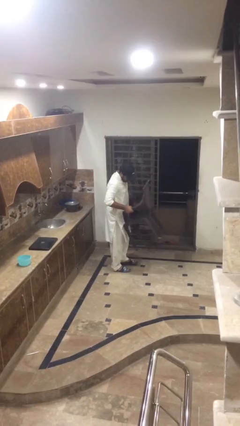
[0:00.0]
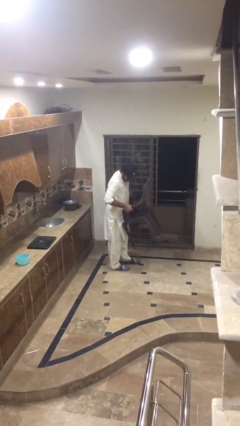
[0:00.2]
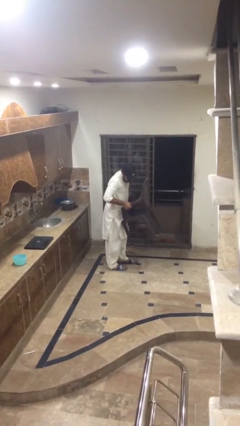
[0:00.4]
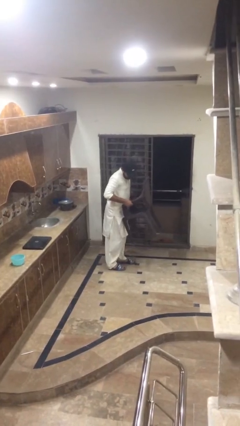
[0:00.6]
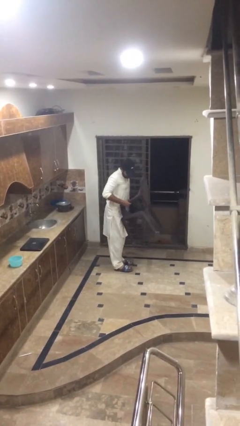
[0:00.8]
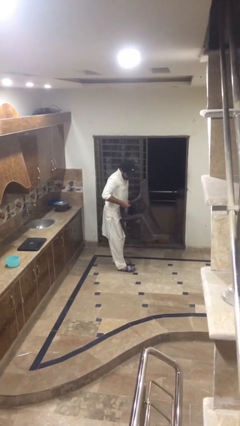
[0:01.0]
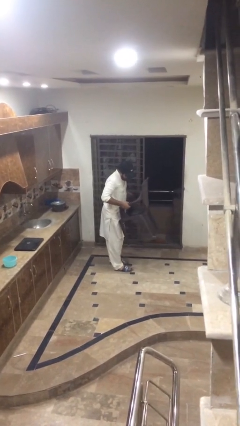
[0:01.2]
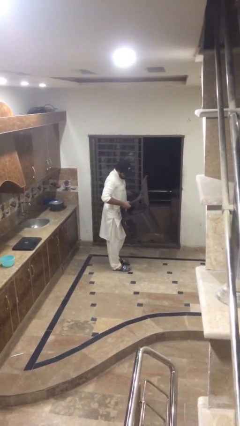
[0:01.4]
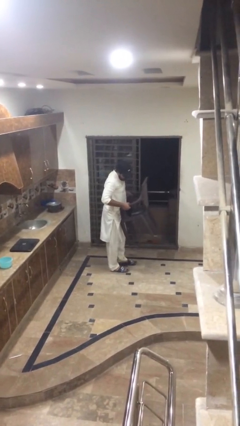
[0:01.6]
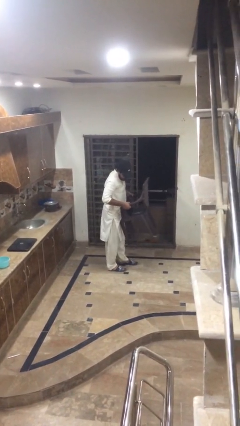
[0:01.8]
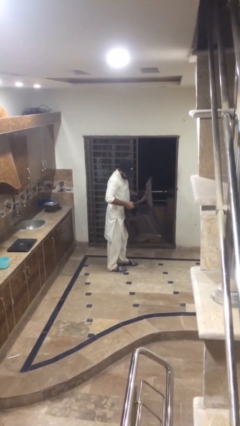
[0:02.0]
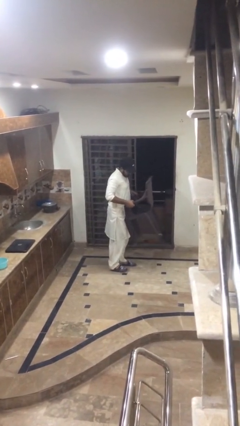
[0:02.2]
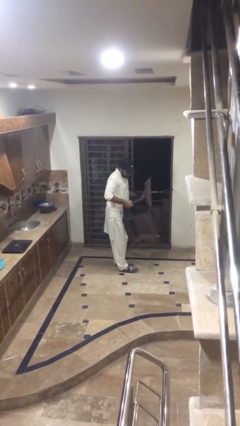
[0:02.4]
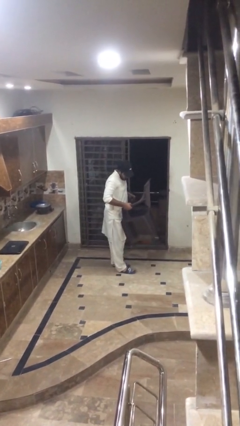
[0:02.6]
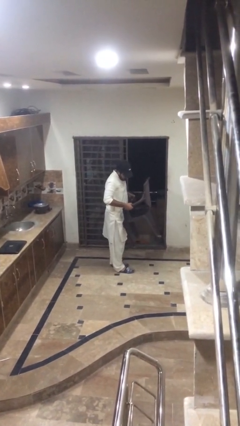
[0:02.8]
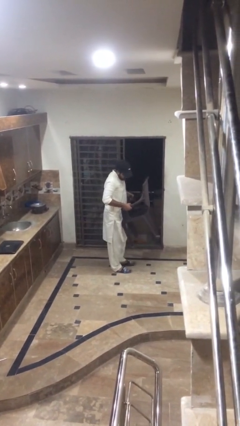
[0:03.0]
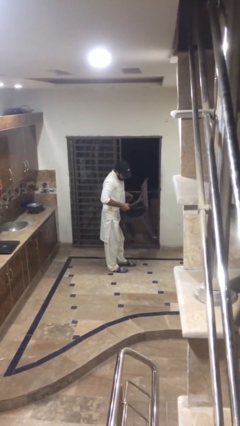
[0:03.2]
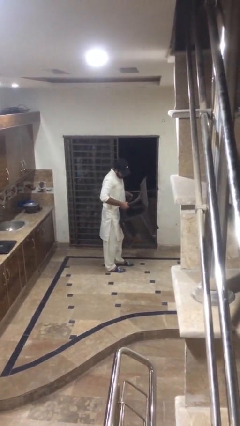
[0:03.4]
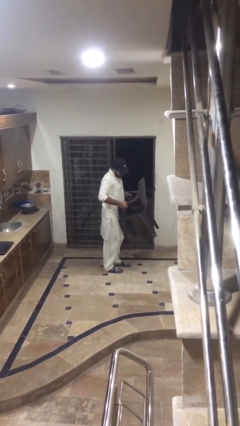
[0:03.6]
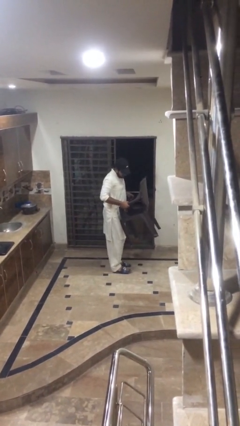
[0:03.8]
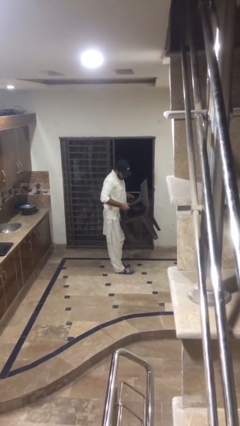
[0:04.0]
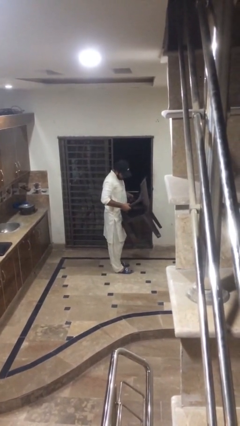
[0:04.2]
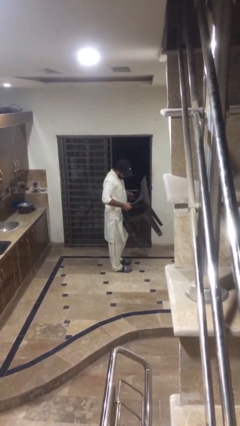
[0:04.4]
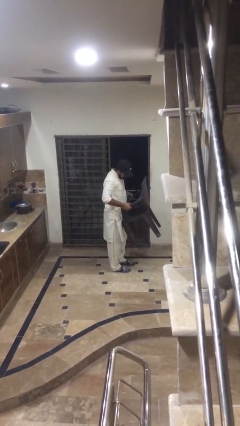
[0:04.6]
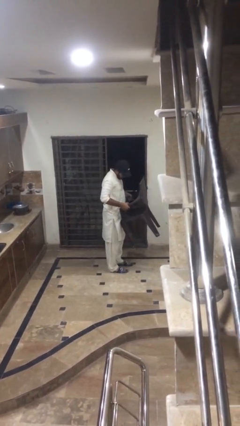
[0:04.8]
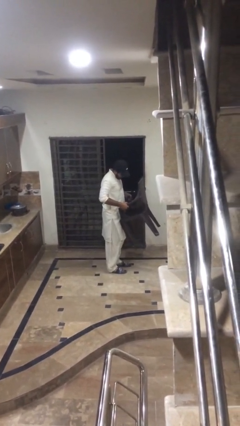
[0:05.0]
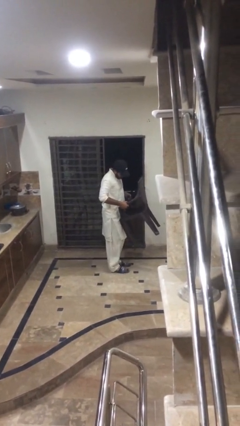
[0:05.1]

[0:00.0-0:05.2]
person carries heavy object

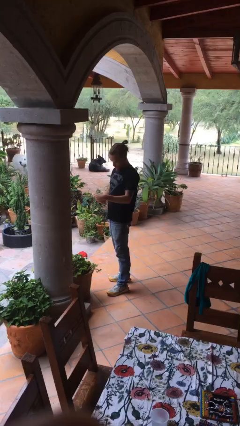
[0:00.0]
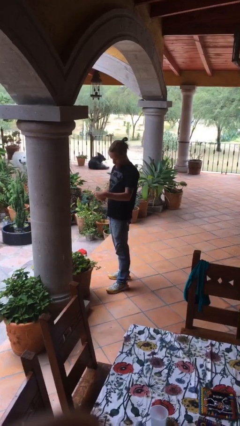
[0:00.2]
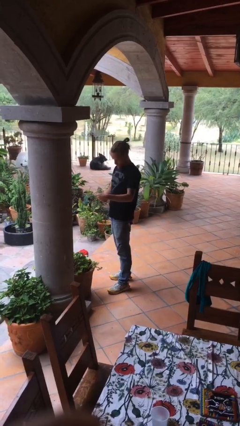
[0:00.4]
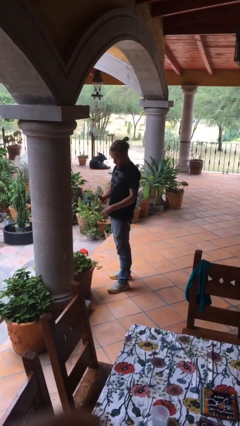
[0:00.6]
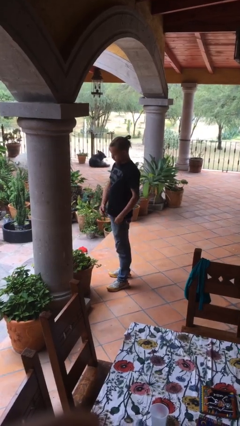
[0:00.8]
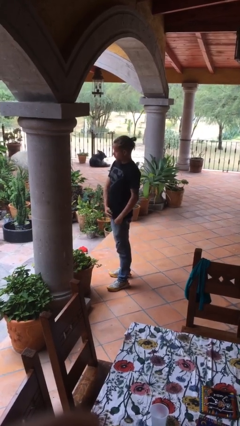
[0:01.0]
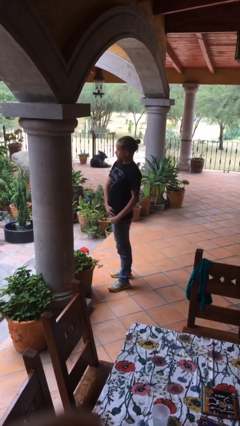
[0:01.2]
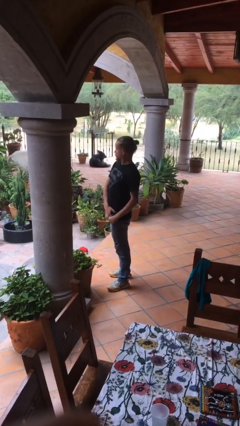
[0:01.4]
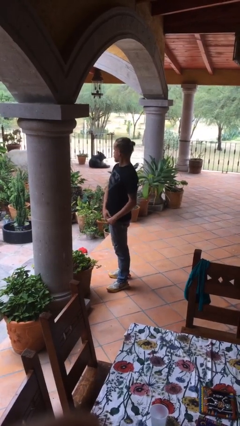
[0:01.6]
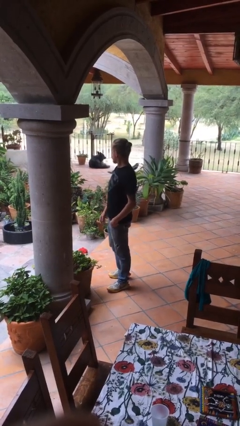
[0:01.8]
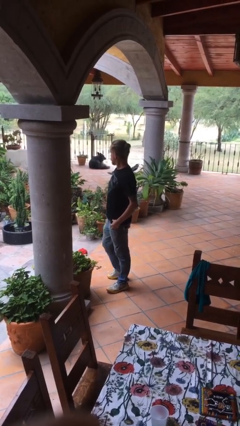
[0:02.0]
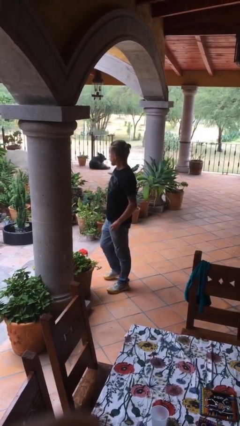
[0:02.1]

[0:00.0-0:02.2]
person puts phone into pocket

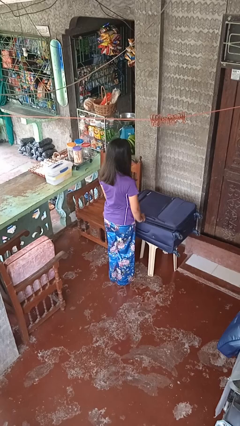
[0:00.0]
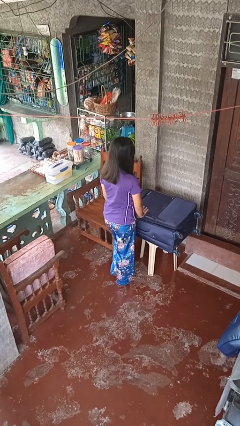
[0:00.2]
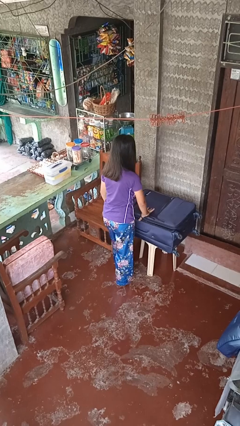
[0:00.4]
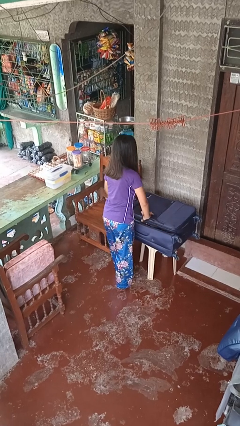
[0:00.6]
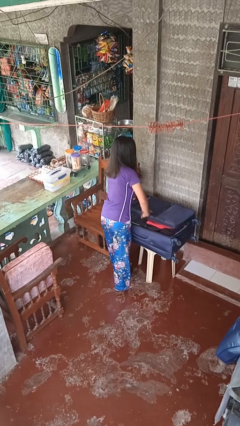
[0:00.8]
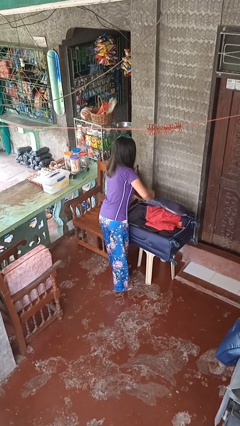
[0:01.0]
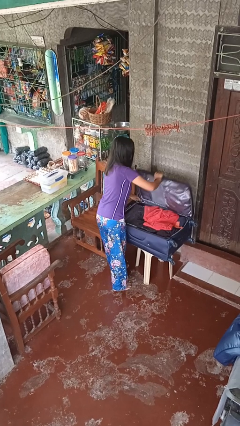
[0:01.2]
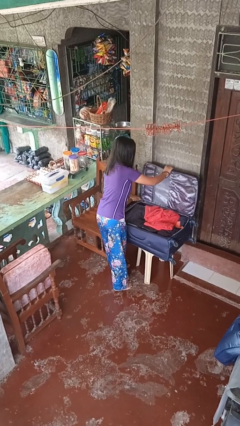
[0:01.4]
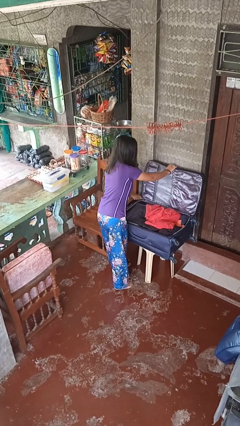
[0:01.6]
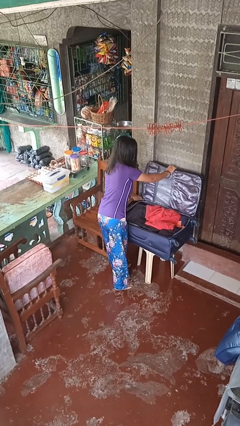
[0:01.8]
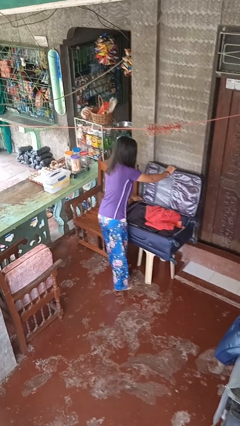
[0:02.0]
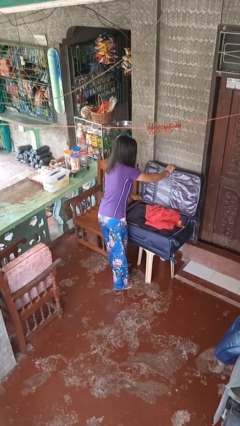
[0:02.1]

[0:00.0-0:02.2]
person opens suitcase

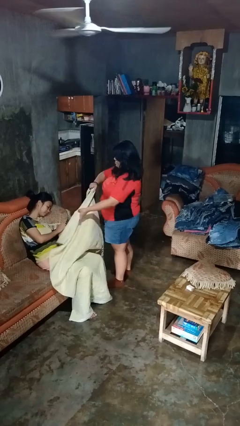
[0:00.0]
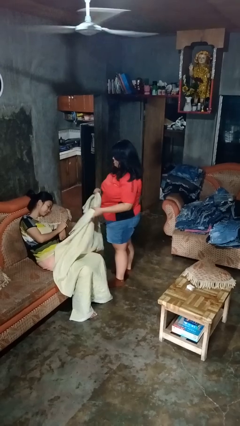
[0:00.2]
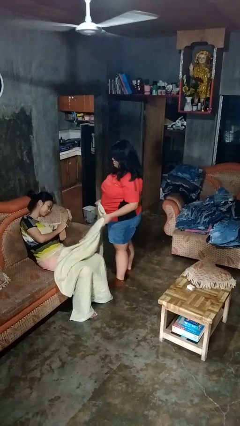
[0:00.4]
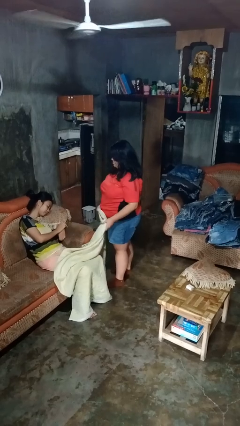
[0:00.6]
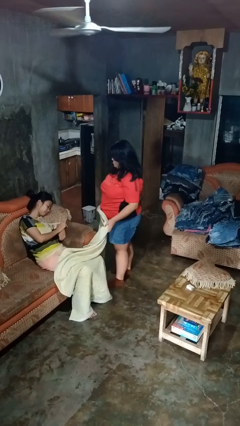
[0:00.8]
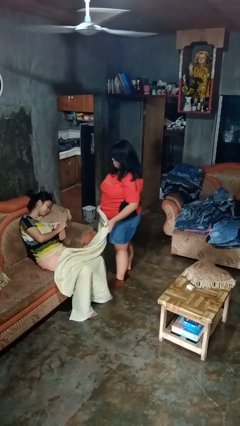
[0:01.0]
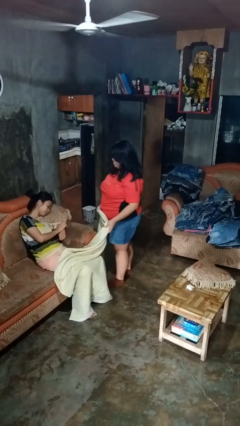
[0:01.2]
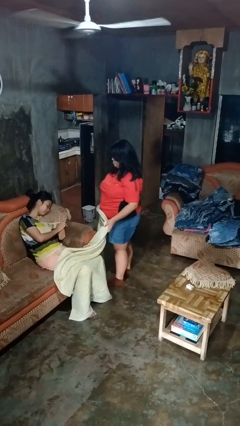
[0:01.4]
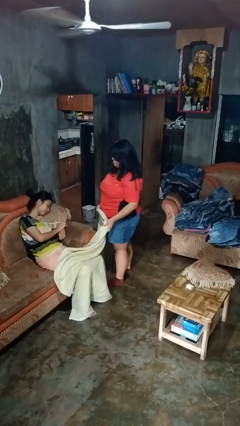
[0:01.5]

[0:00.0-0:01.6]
person uncovers friend with blanket

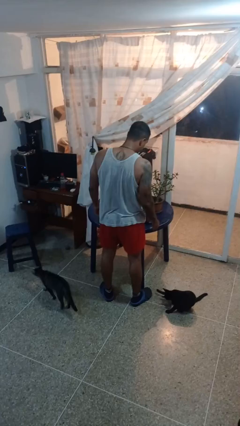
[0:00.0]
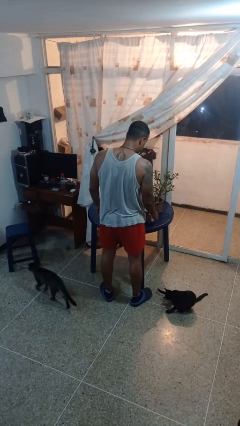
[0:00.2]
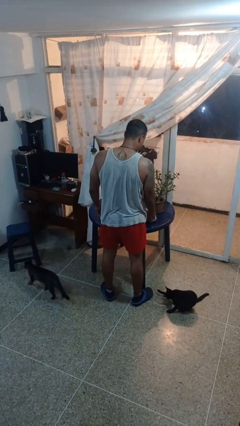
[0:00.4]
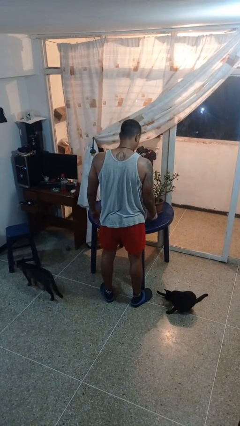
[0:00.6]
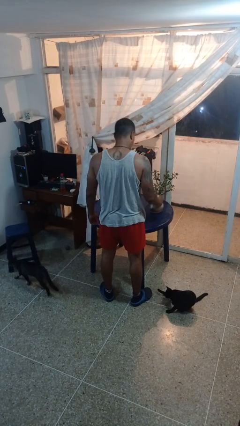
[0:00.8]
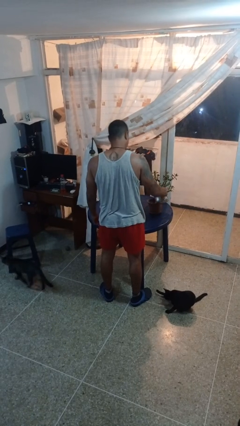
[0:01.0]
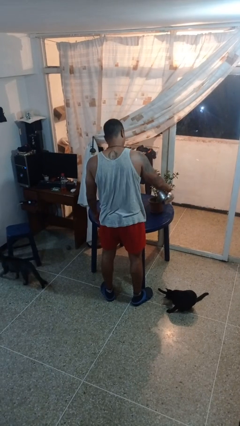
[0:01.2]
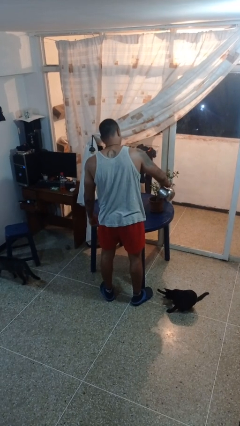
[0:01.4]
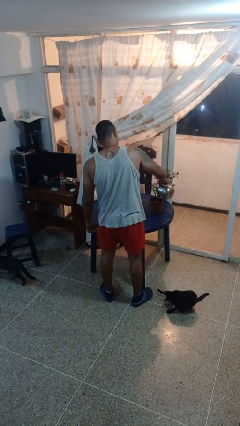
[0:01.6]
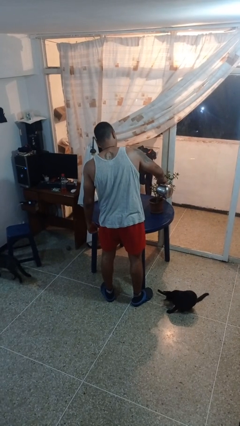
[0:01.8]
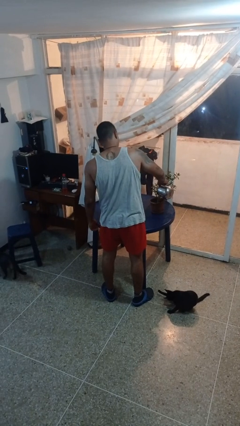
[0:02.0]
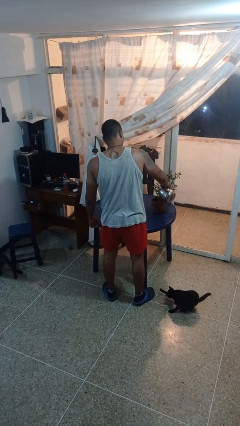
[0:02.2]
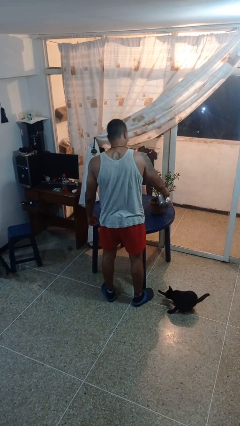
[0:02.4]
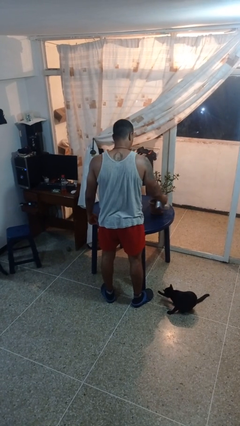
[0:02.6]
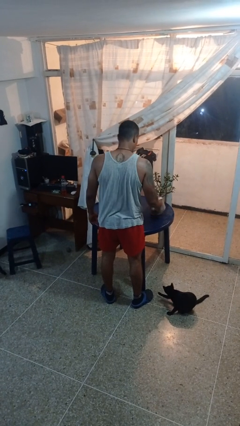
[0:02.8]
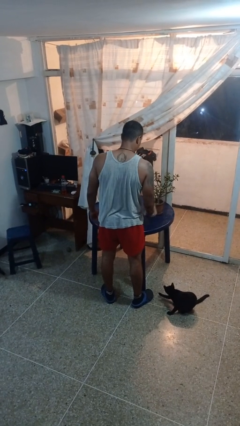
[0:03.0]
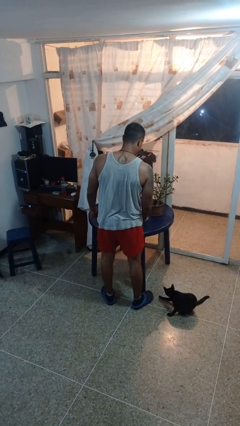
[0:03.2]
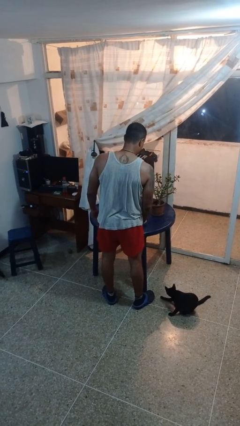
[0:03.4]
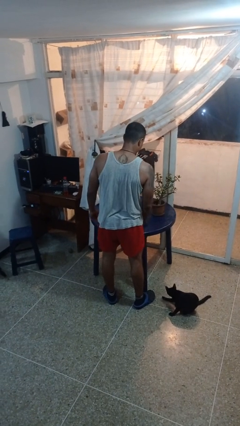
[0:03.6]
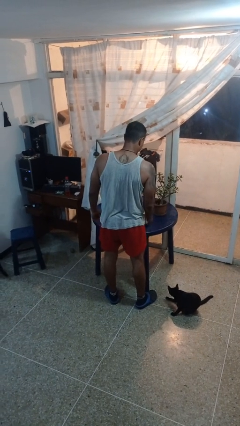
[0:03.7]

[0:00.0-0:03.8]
person waters houseplant

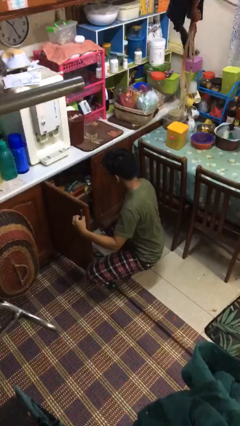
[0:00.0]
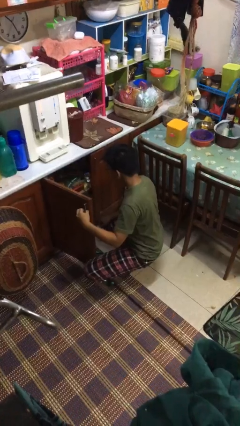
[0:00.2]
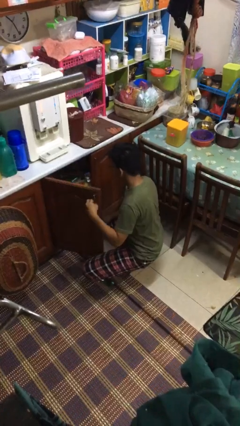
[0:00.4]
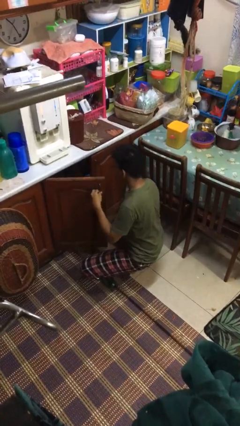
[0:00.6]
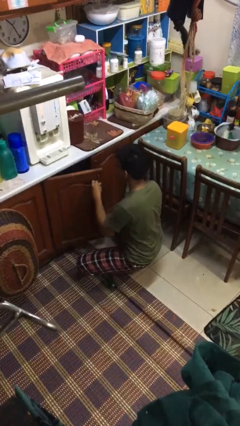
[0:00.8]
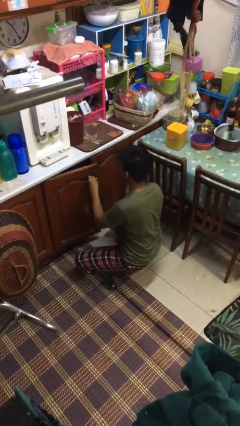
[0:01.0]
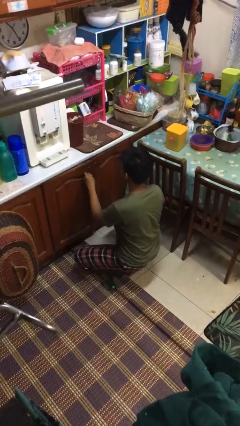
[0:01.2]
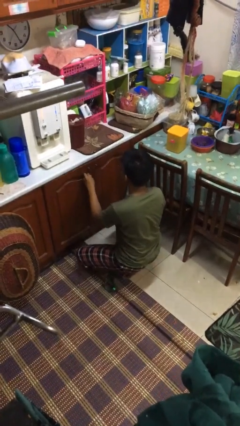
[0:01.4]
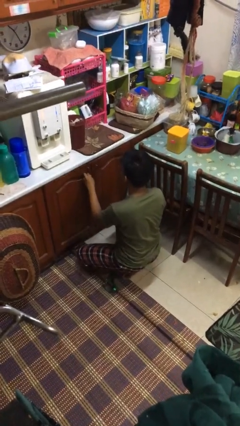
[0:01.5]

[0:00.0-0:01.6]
person closes kitchen drawer

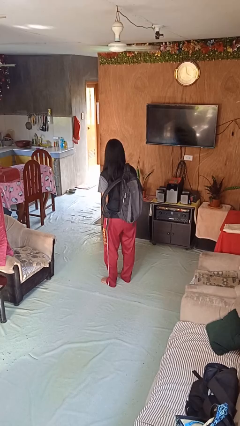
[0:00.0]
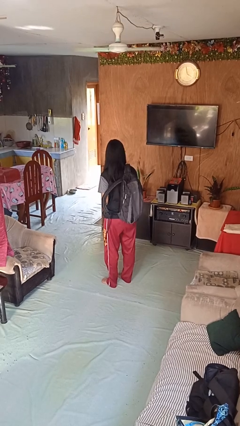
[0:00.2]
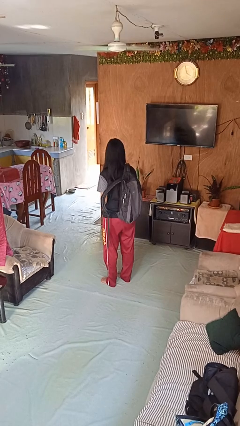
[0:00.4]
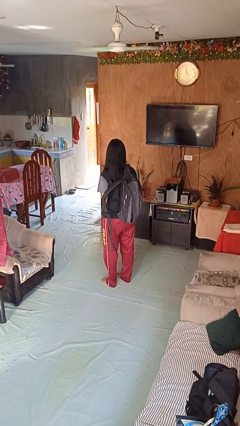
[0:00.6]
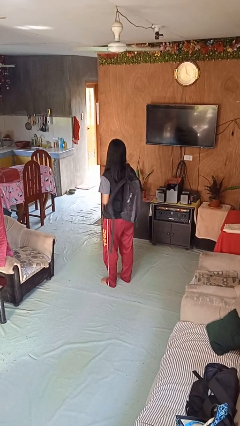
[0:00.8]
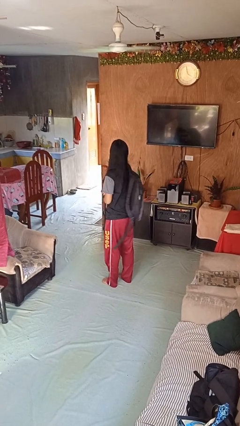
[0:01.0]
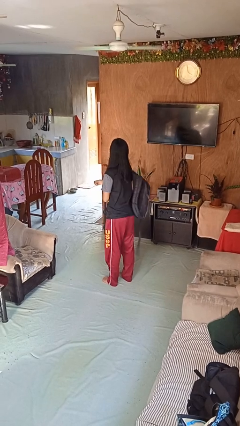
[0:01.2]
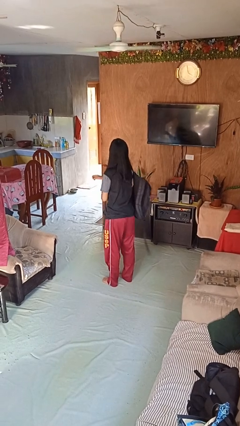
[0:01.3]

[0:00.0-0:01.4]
person takes off backpack
